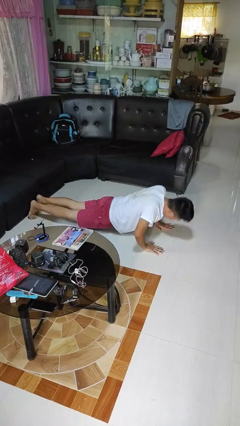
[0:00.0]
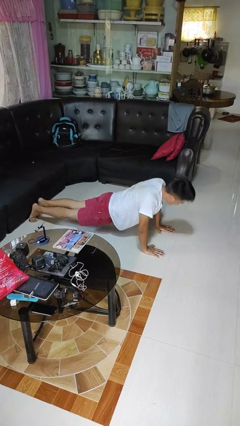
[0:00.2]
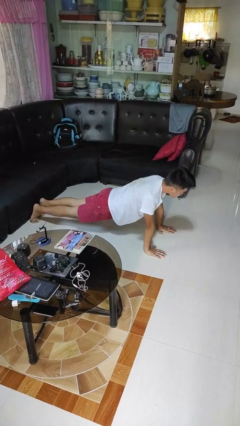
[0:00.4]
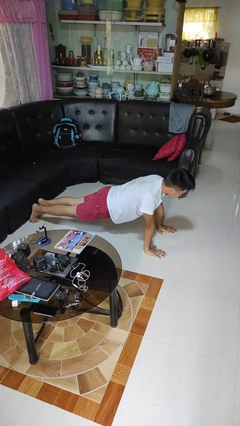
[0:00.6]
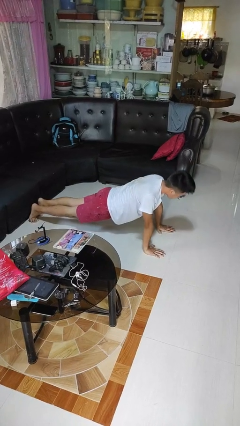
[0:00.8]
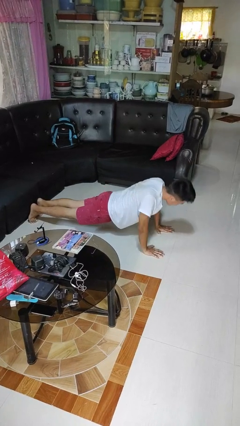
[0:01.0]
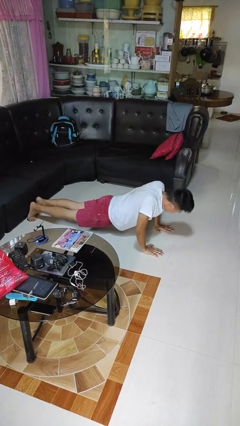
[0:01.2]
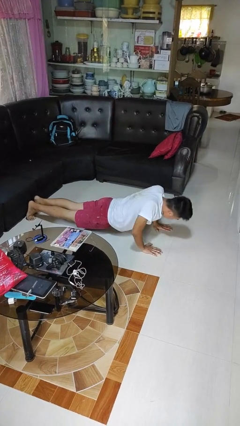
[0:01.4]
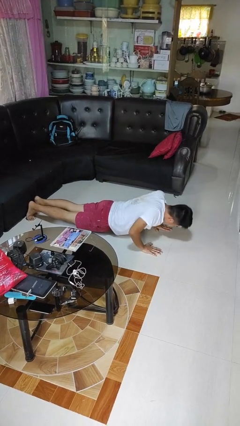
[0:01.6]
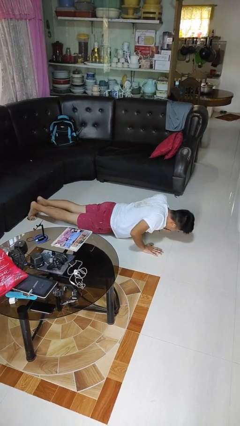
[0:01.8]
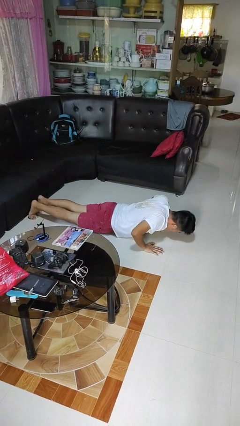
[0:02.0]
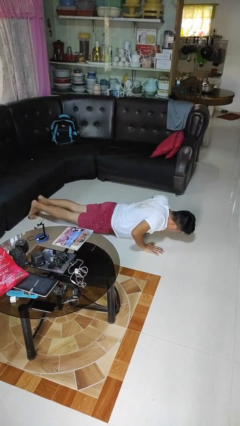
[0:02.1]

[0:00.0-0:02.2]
person exercises with pushup

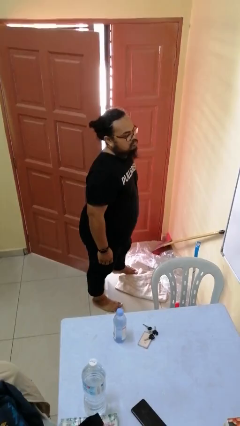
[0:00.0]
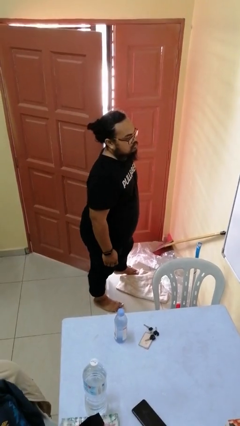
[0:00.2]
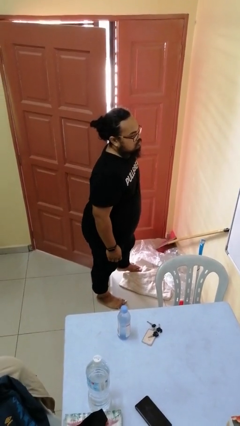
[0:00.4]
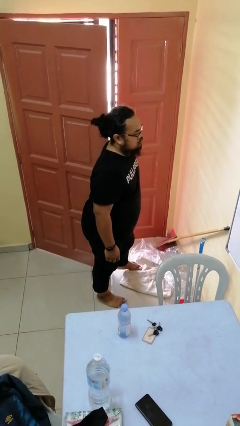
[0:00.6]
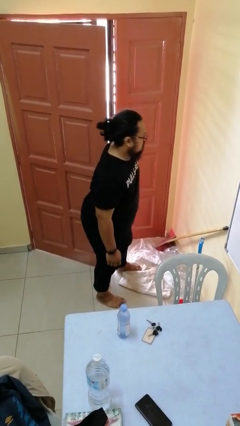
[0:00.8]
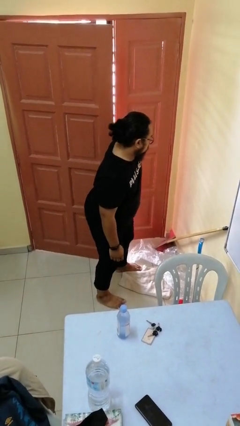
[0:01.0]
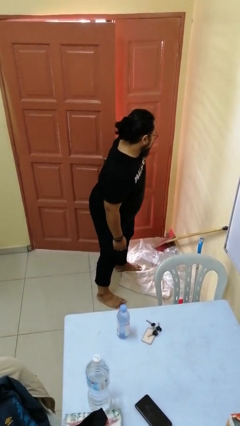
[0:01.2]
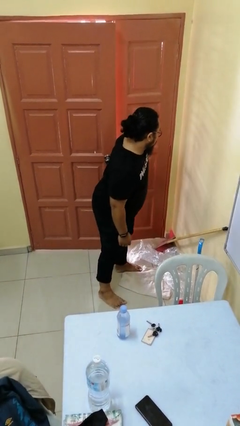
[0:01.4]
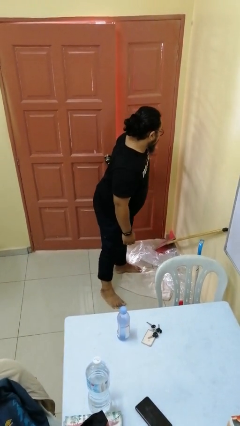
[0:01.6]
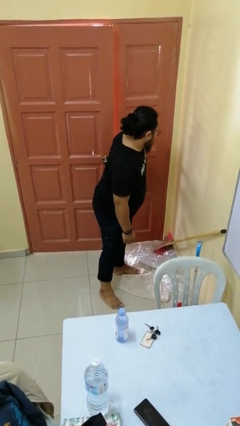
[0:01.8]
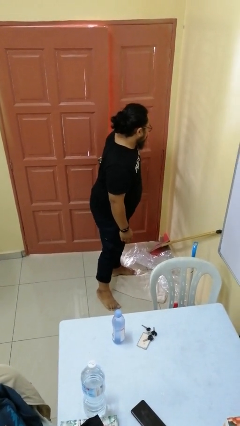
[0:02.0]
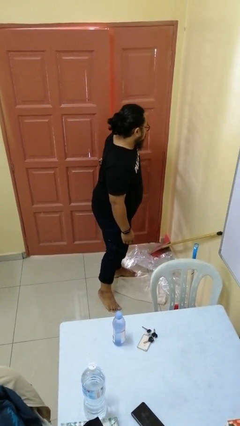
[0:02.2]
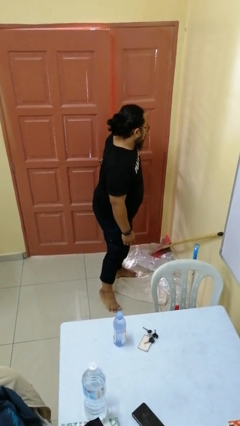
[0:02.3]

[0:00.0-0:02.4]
person closes door with hip

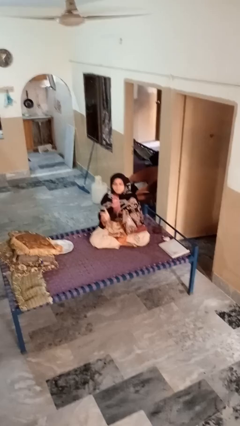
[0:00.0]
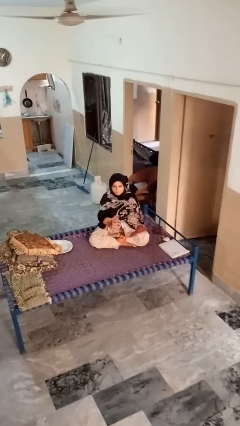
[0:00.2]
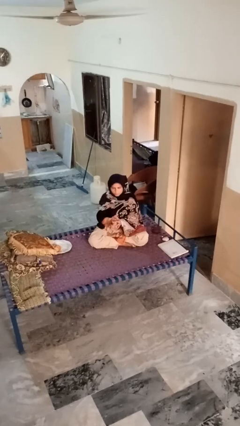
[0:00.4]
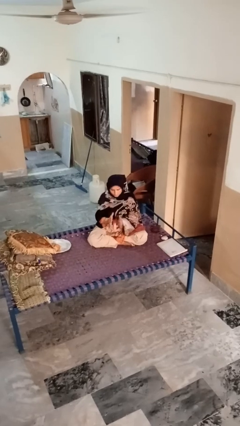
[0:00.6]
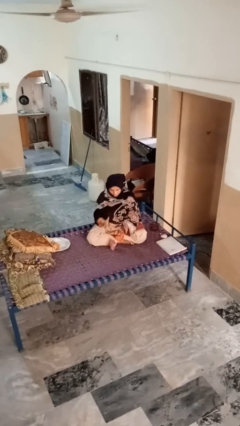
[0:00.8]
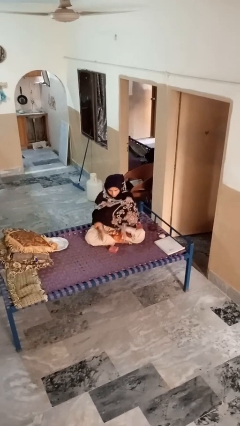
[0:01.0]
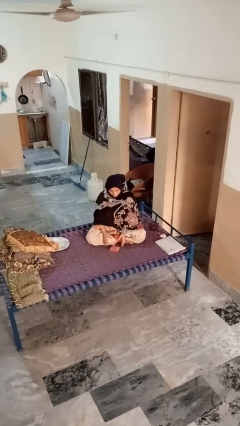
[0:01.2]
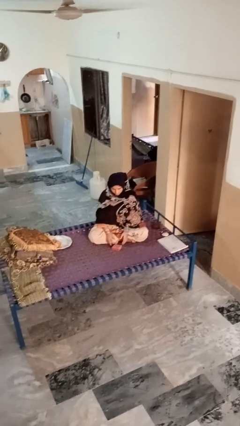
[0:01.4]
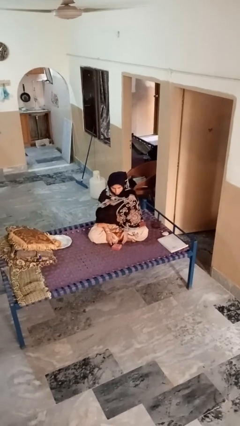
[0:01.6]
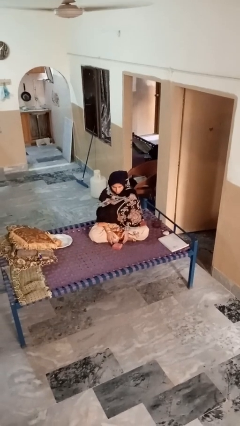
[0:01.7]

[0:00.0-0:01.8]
person catches dropped object

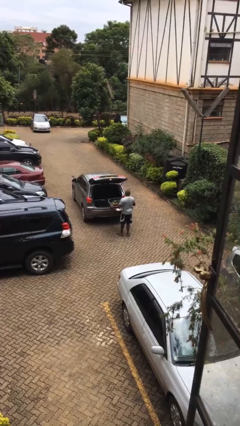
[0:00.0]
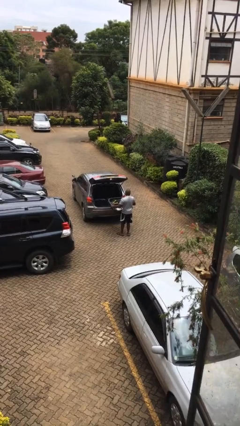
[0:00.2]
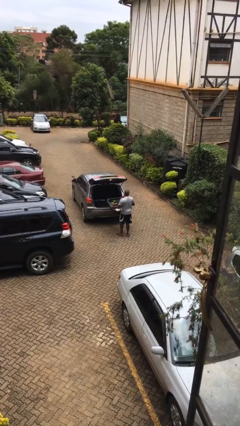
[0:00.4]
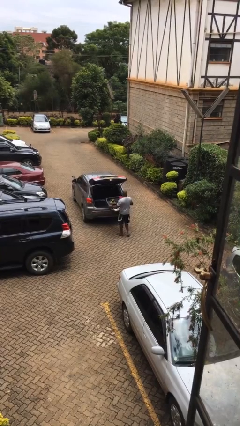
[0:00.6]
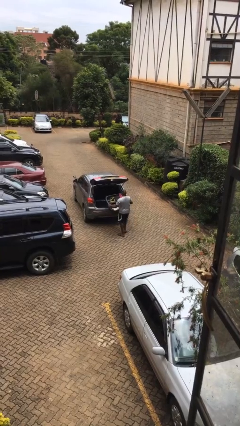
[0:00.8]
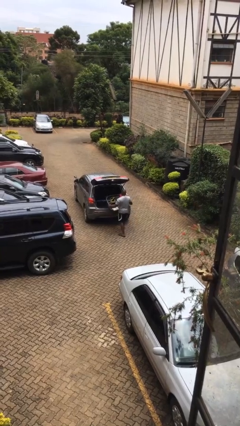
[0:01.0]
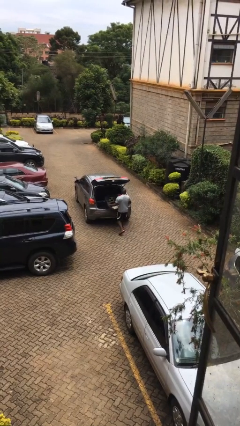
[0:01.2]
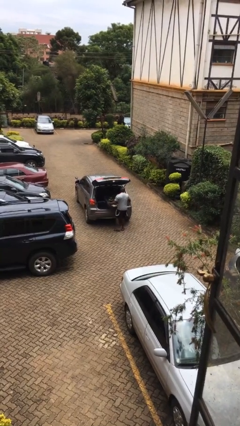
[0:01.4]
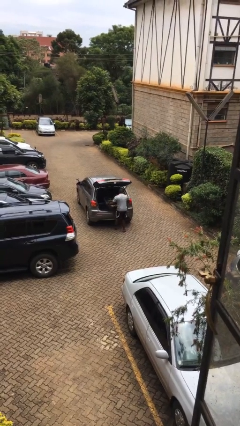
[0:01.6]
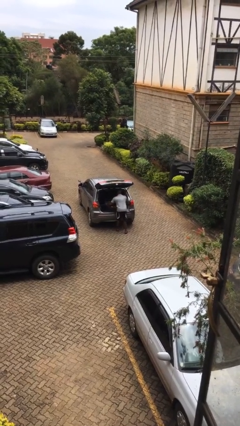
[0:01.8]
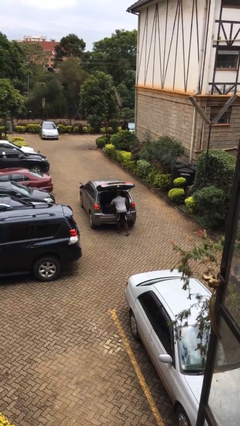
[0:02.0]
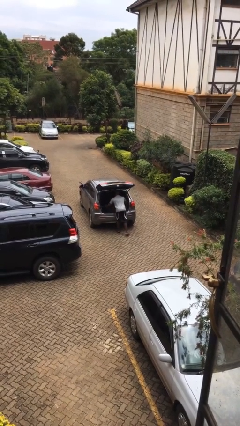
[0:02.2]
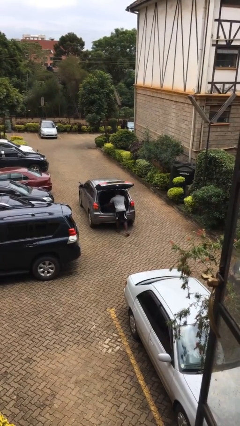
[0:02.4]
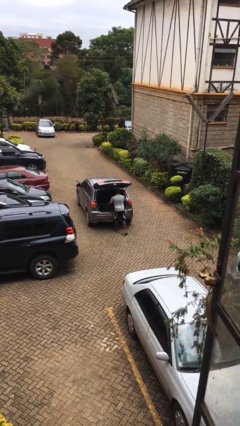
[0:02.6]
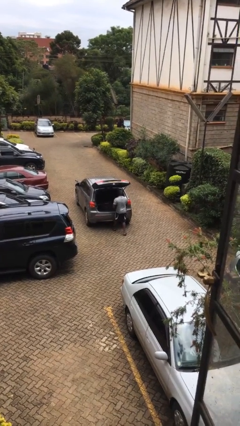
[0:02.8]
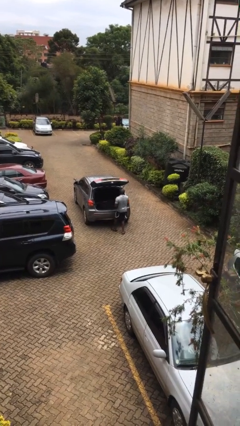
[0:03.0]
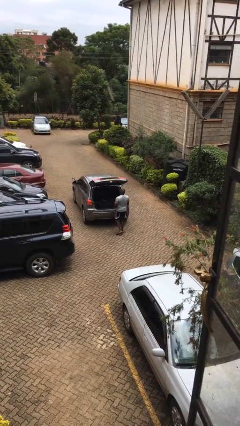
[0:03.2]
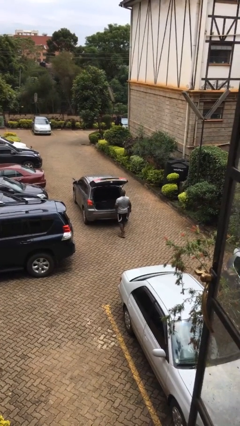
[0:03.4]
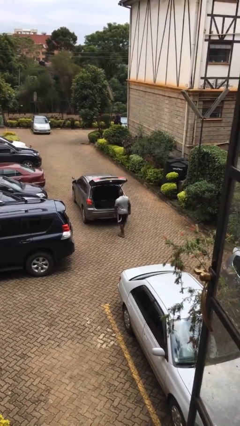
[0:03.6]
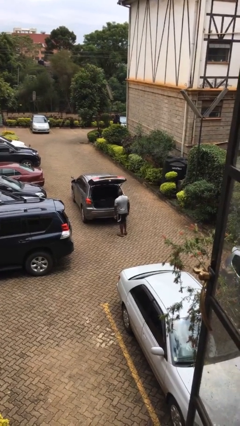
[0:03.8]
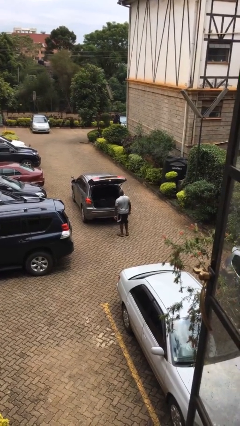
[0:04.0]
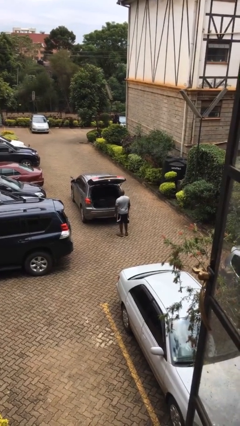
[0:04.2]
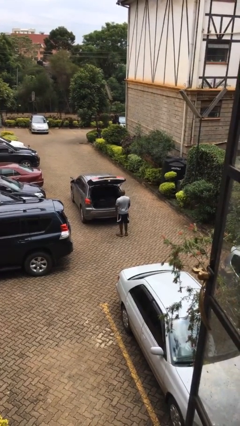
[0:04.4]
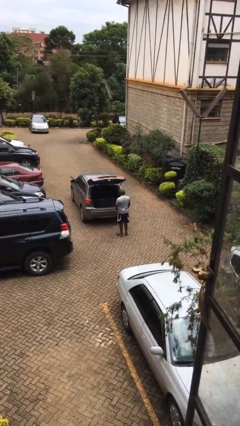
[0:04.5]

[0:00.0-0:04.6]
person loads car

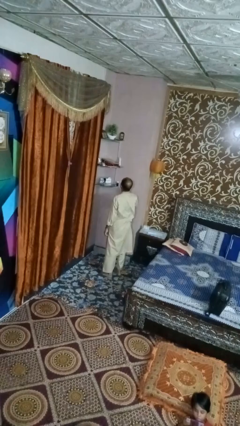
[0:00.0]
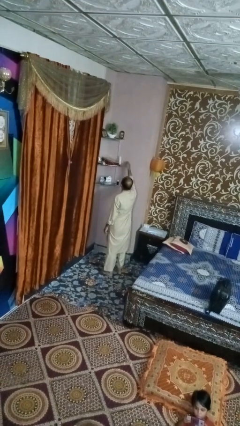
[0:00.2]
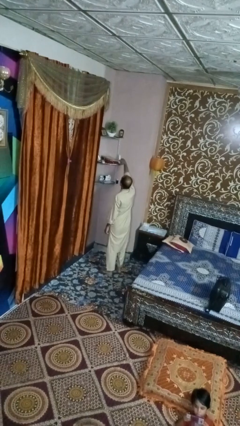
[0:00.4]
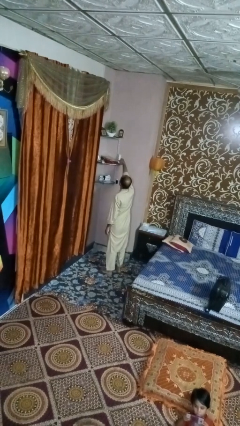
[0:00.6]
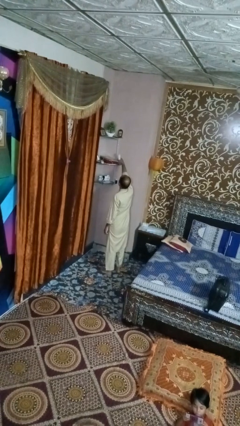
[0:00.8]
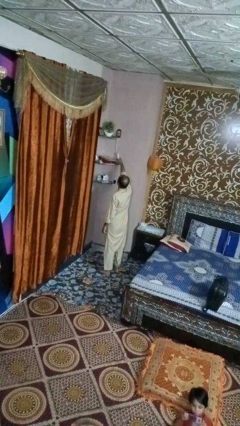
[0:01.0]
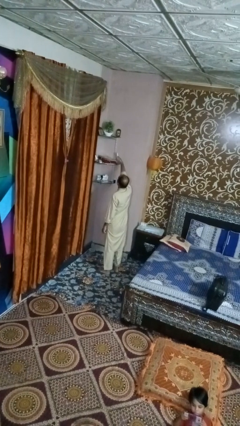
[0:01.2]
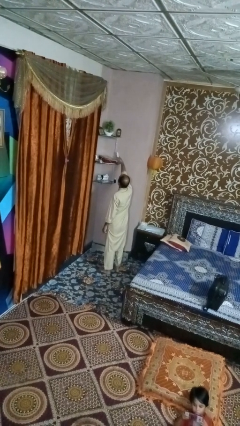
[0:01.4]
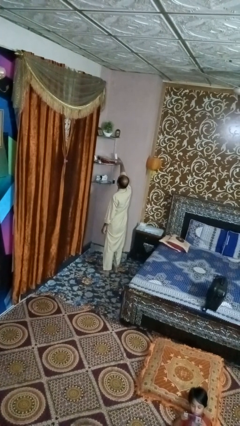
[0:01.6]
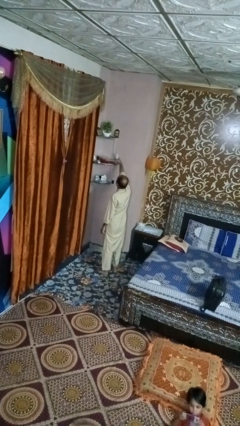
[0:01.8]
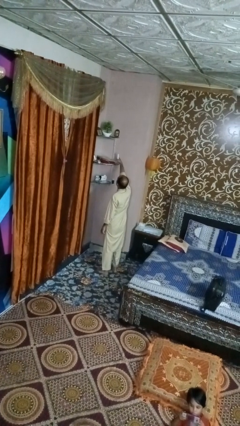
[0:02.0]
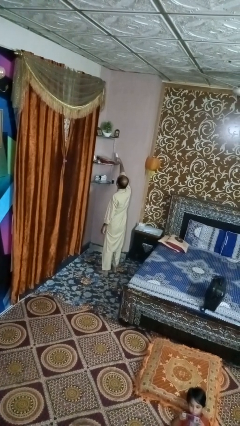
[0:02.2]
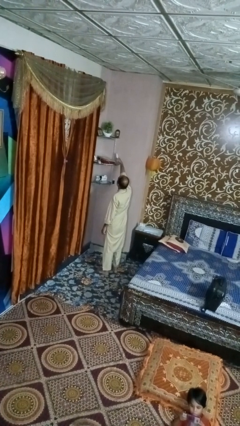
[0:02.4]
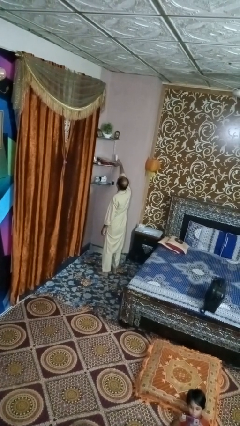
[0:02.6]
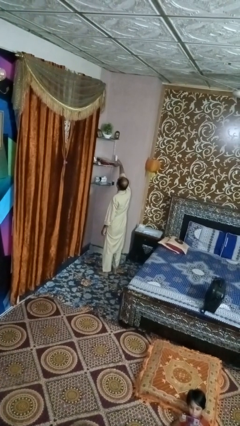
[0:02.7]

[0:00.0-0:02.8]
person picks up object from shelf

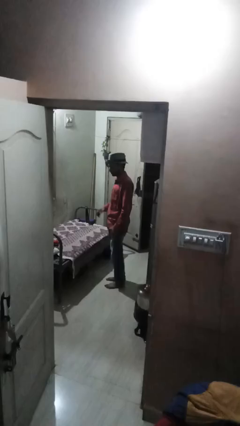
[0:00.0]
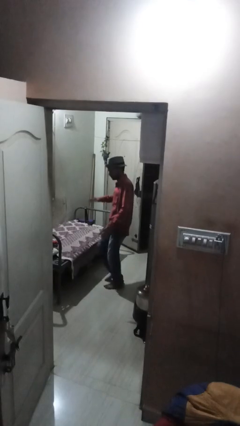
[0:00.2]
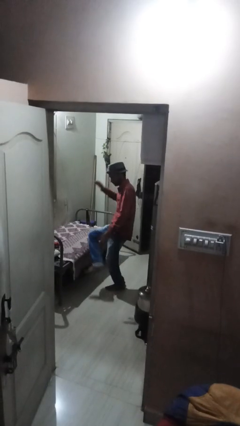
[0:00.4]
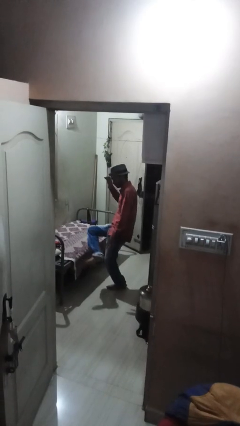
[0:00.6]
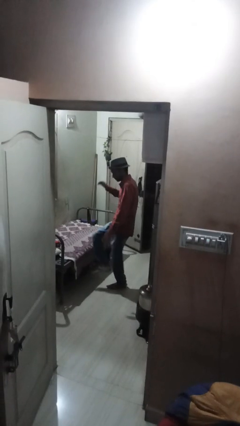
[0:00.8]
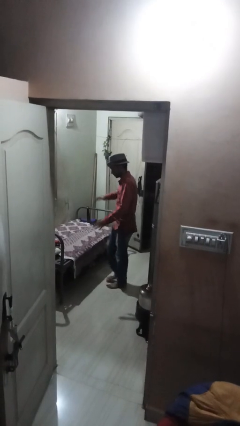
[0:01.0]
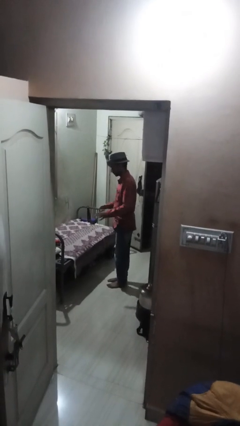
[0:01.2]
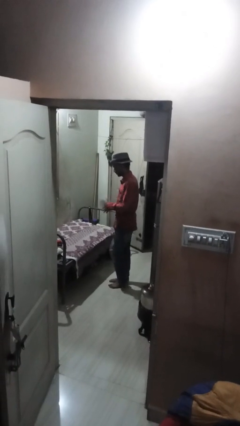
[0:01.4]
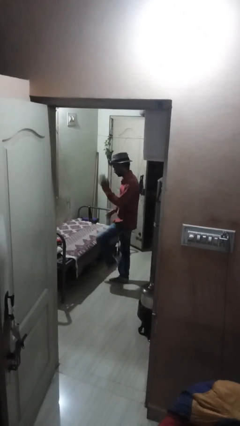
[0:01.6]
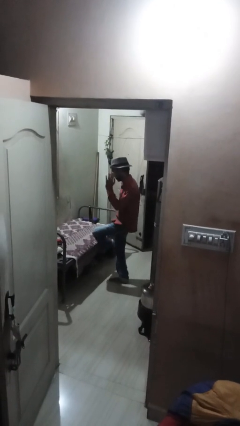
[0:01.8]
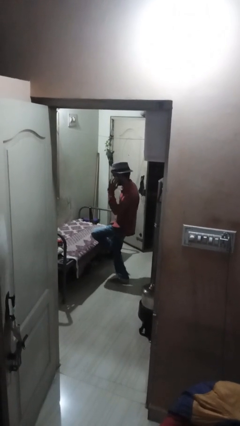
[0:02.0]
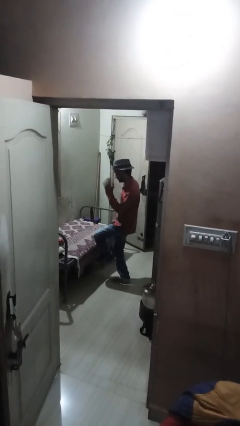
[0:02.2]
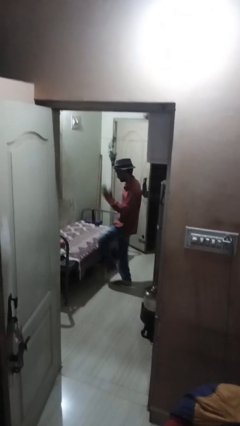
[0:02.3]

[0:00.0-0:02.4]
person dances in place

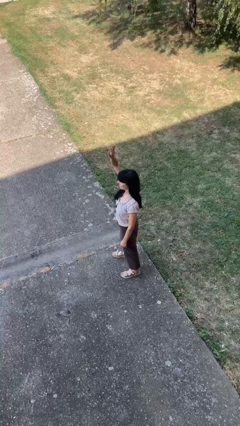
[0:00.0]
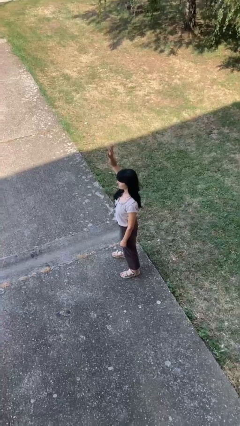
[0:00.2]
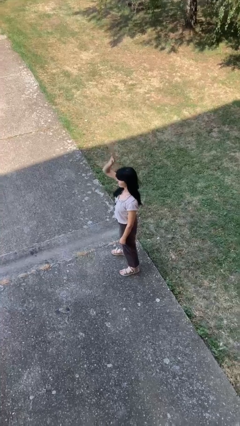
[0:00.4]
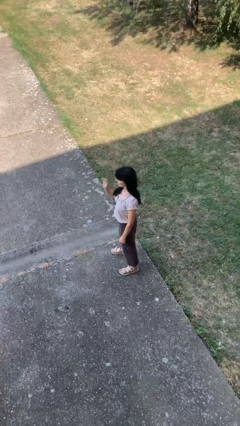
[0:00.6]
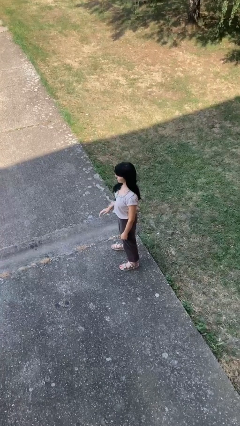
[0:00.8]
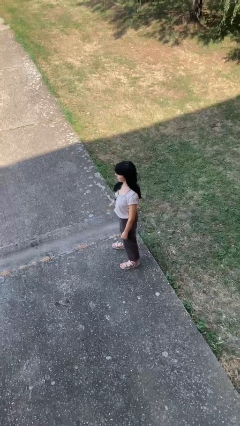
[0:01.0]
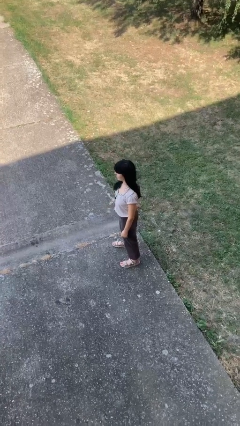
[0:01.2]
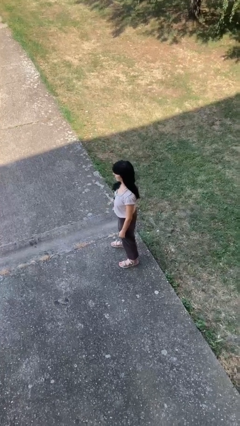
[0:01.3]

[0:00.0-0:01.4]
person gestures lower hand
